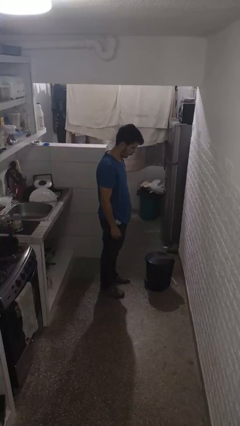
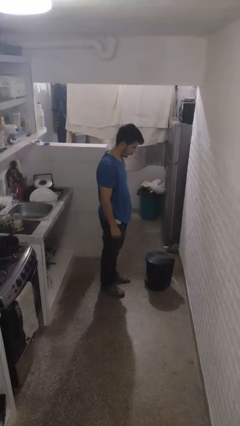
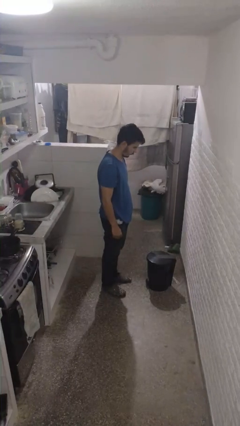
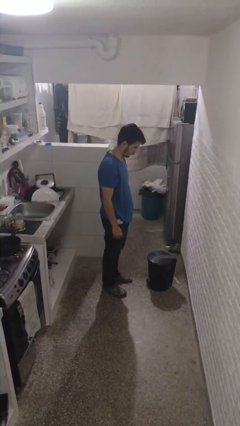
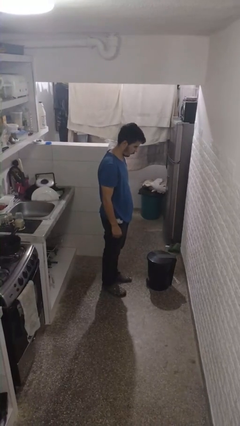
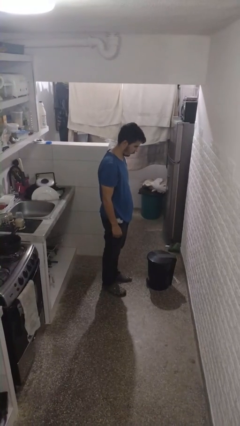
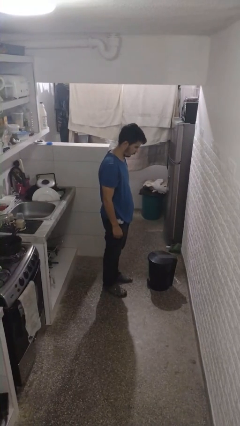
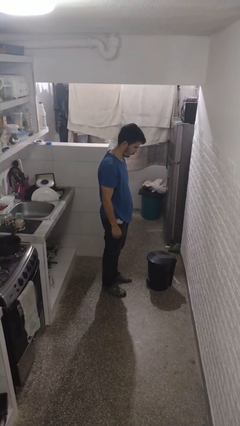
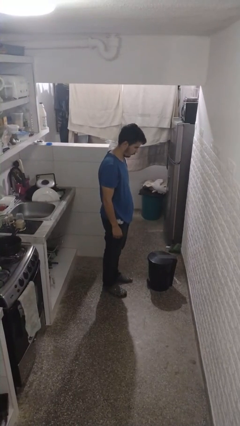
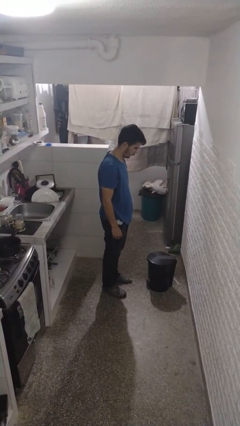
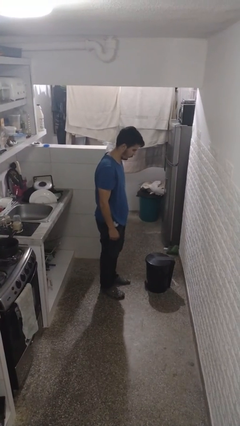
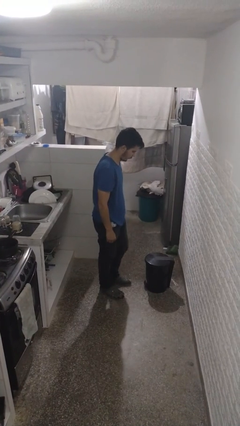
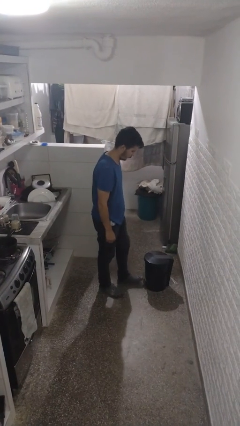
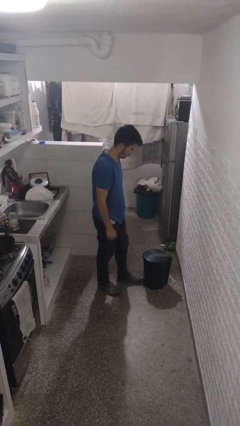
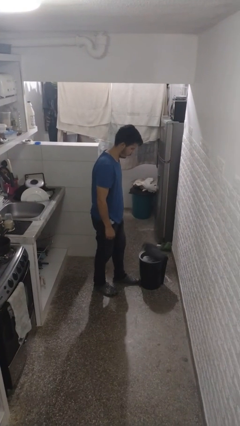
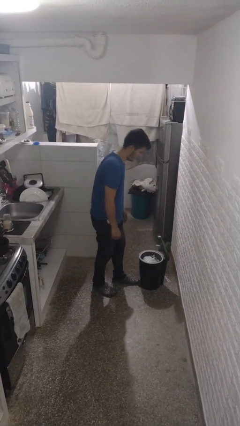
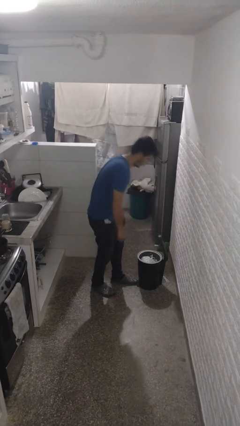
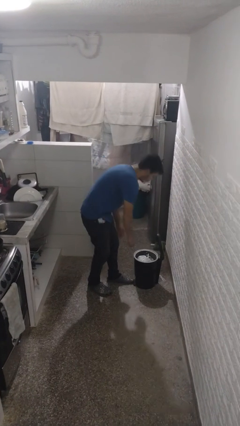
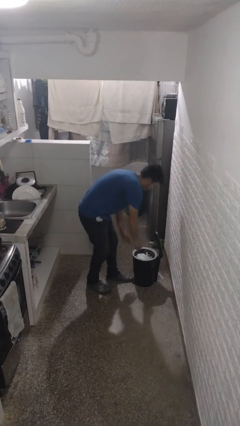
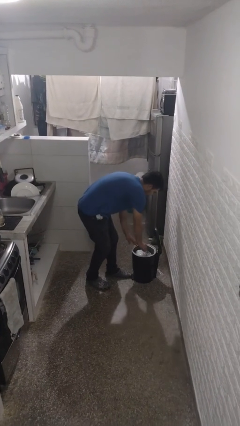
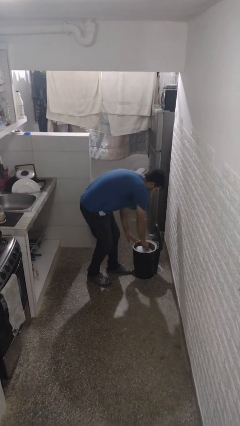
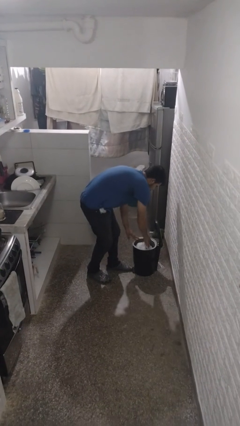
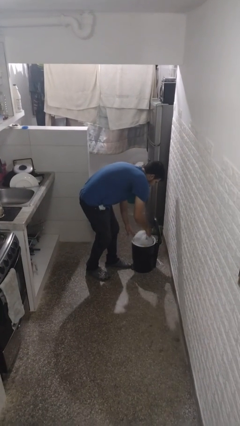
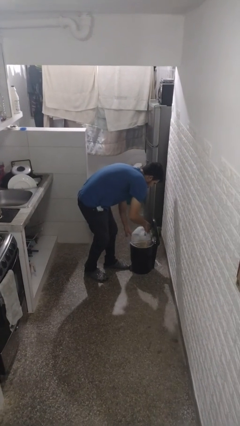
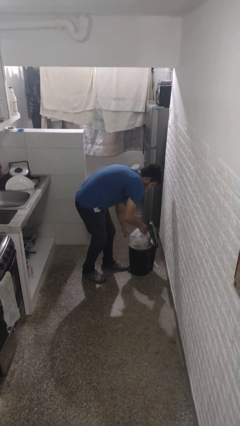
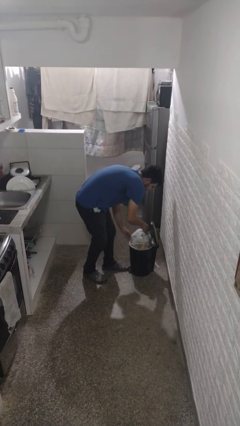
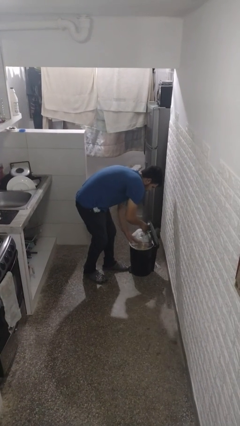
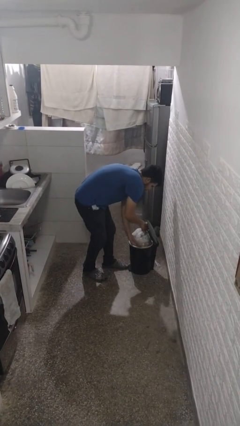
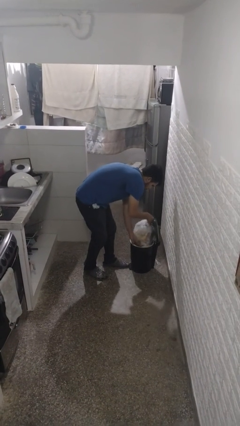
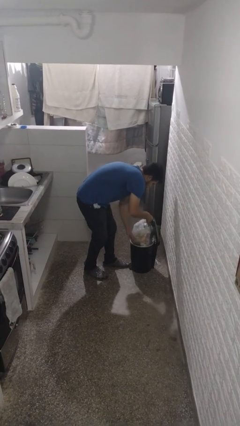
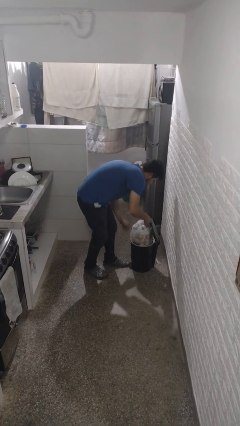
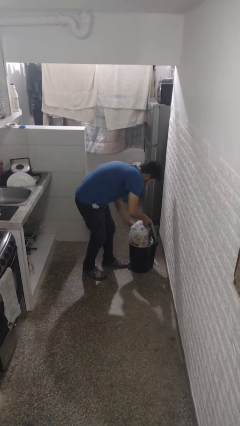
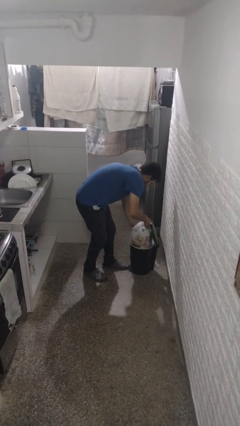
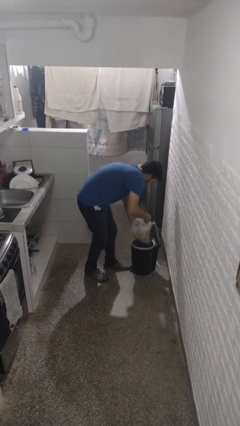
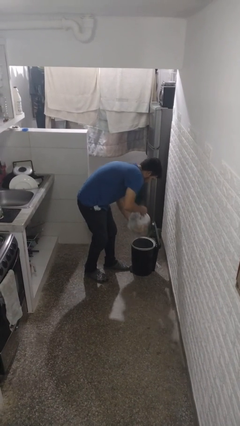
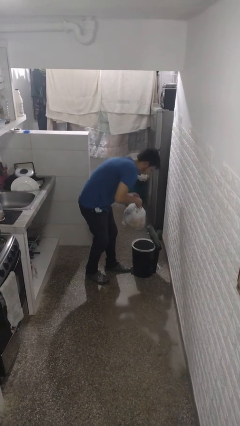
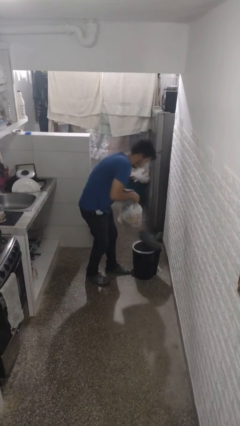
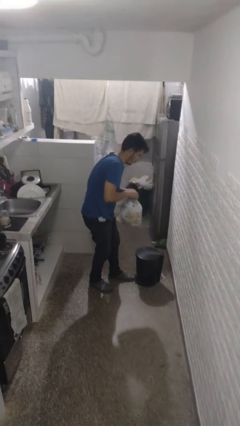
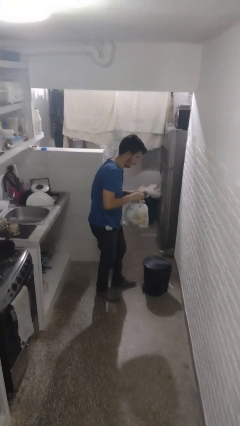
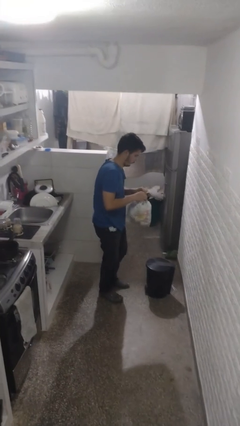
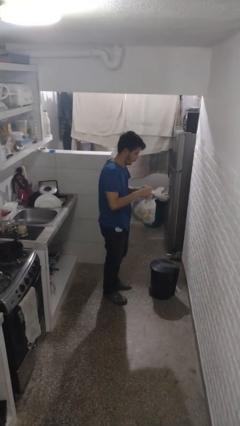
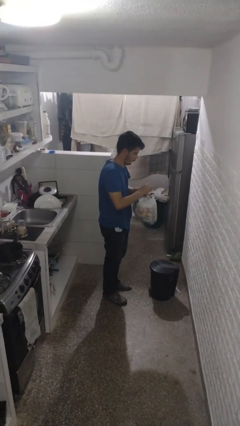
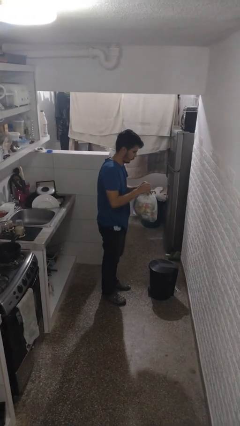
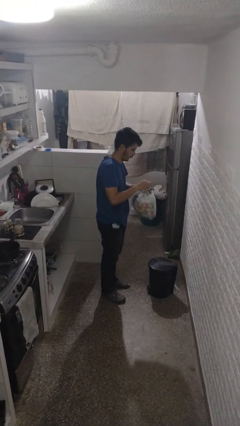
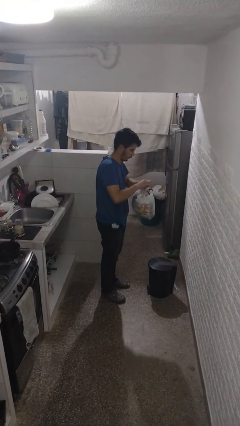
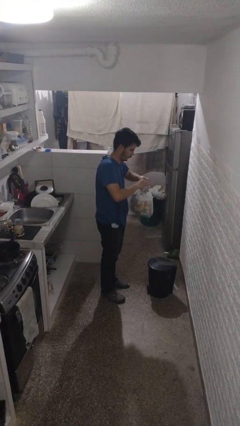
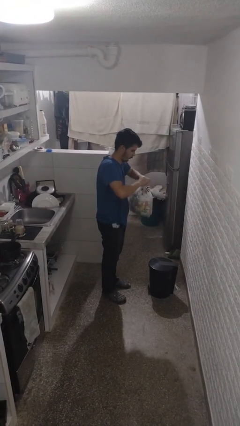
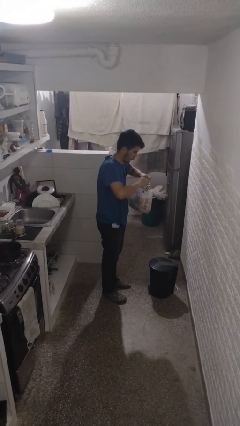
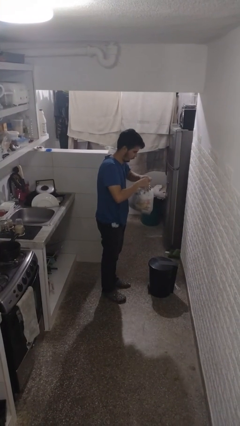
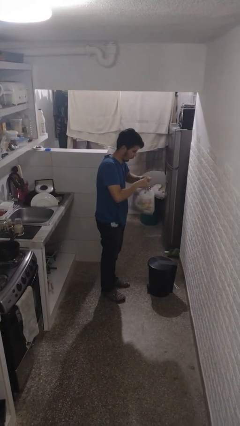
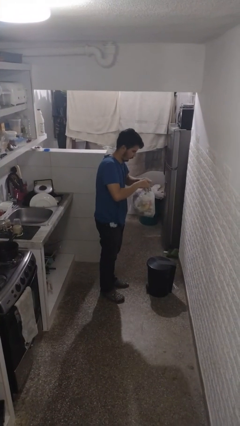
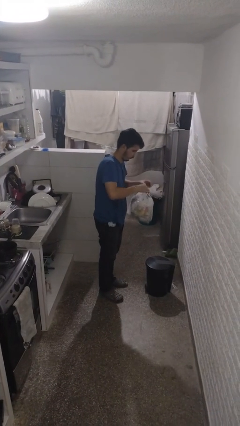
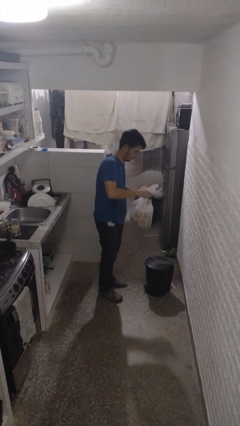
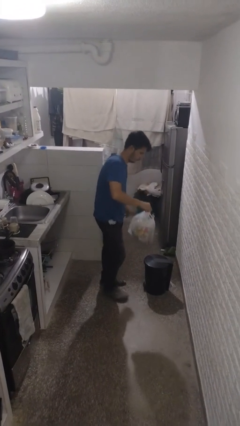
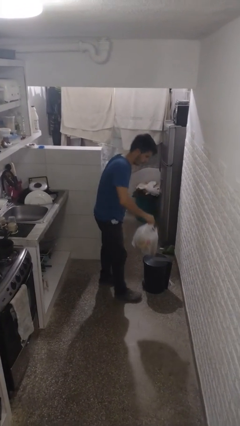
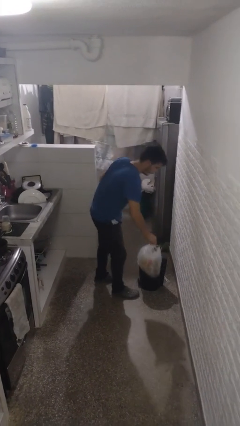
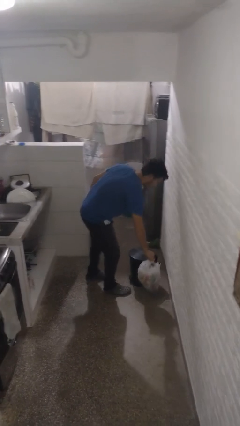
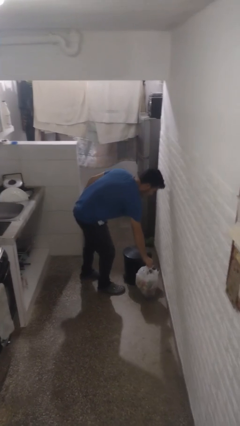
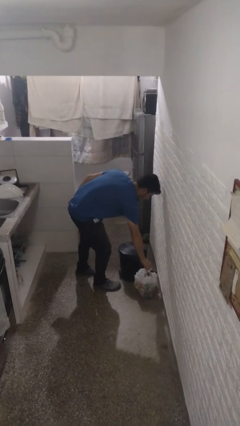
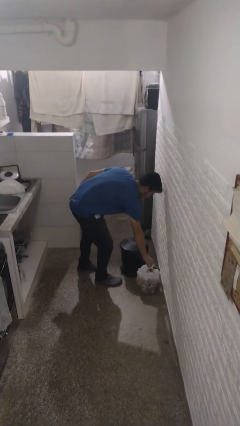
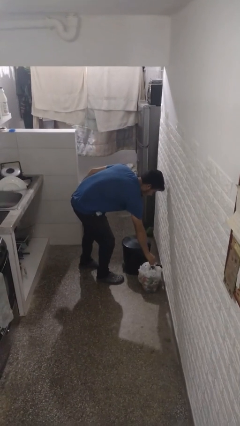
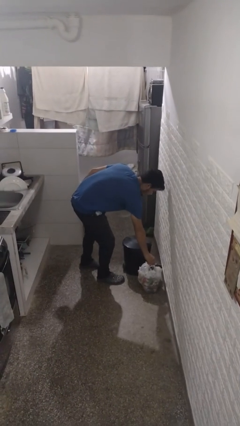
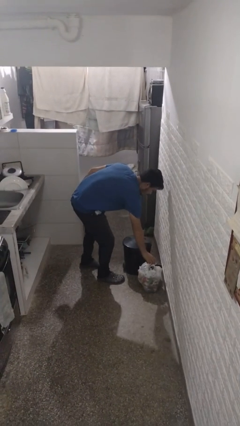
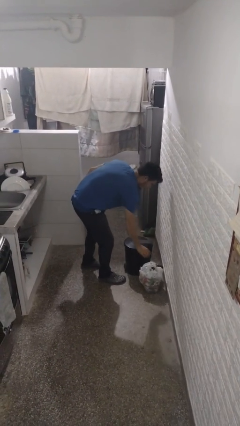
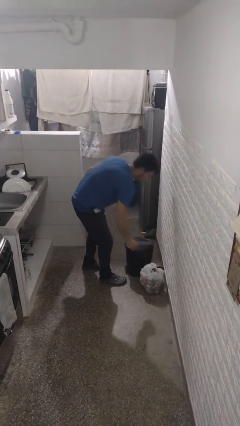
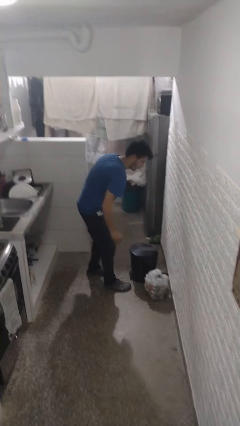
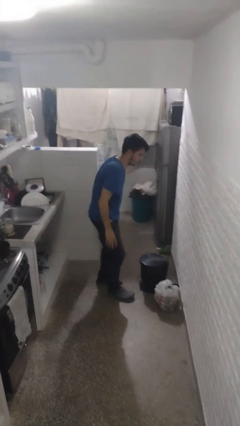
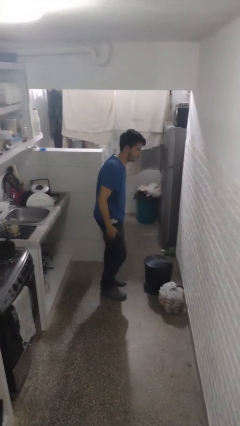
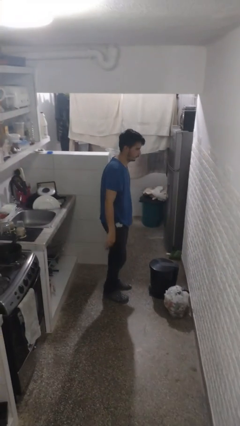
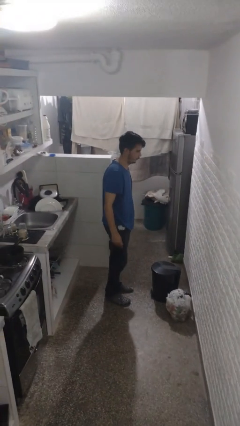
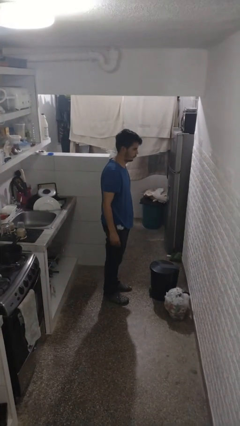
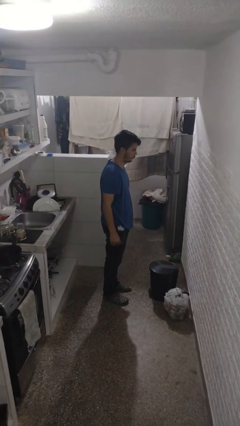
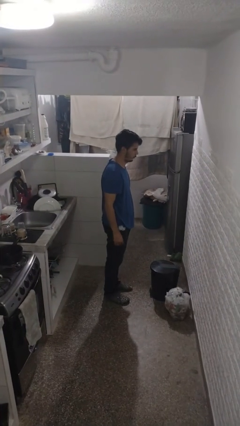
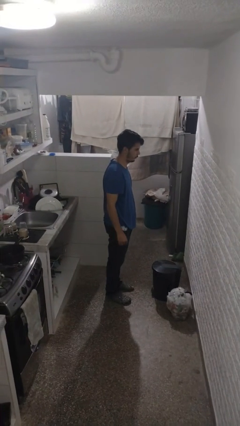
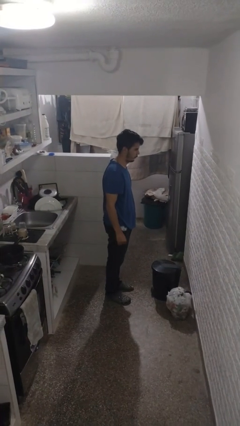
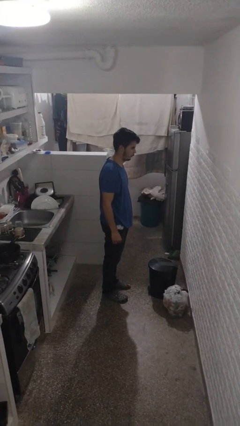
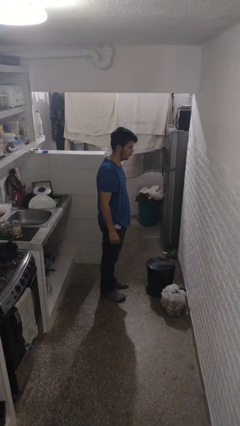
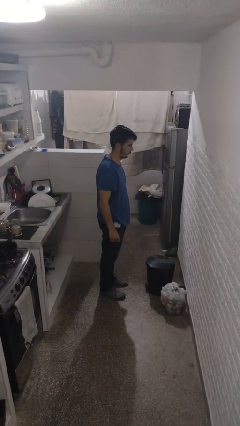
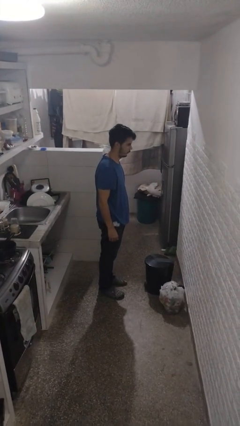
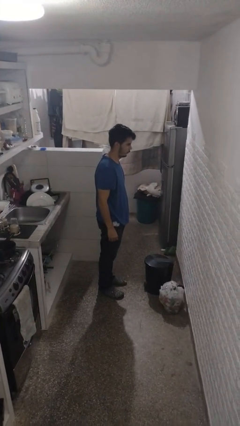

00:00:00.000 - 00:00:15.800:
person removes trashbag from trashcan

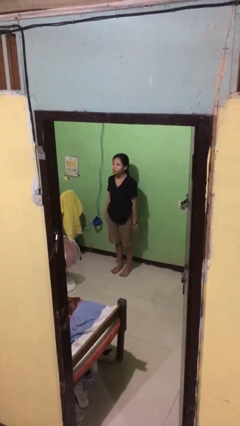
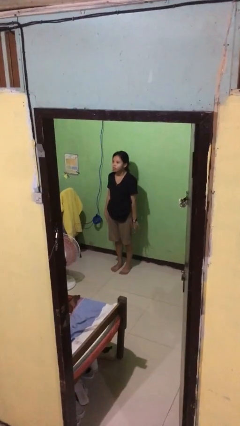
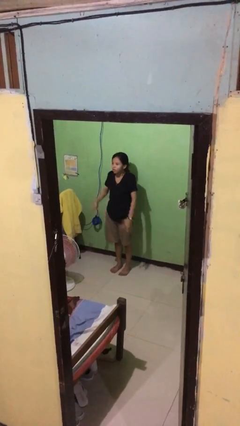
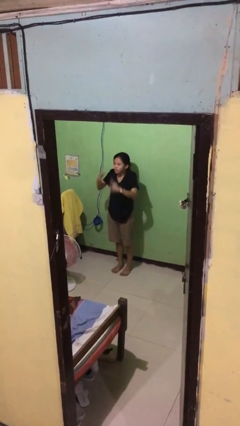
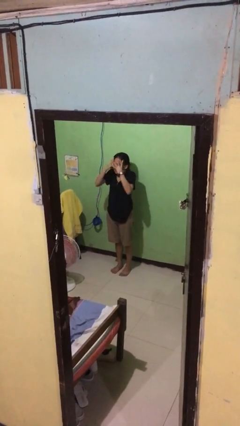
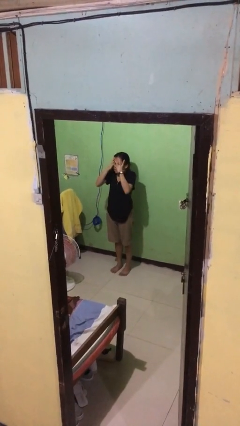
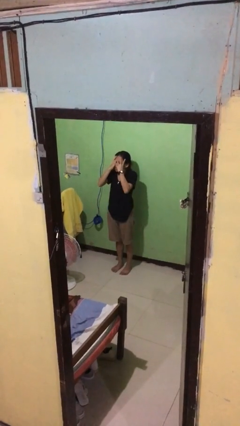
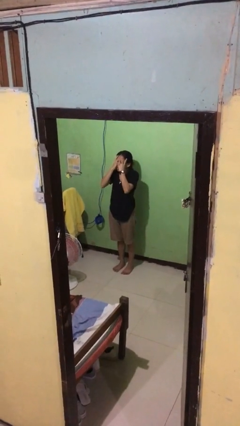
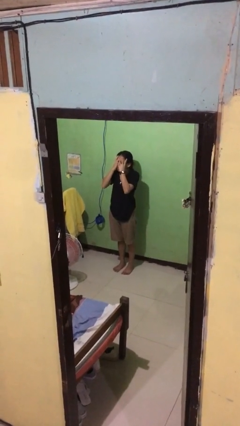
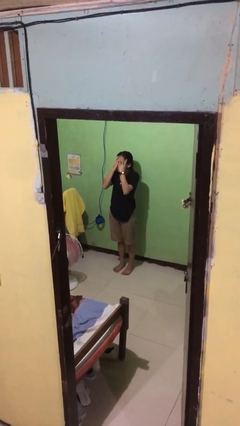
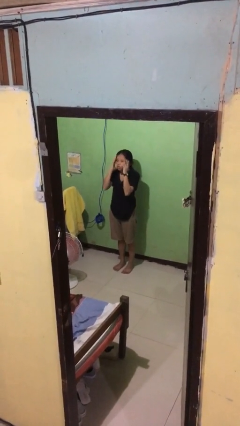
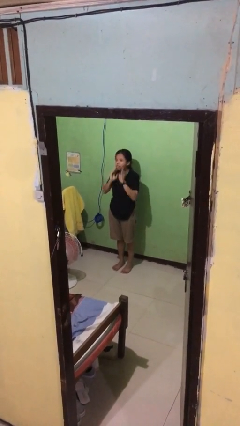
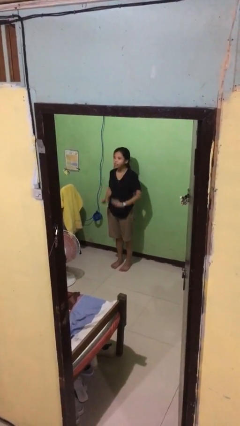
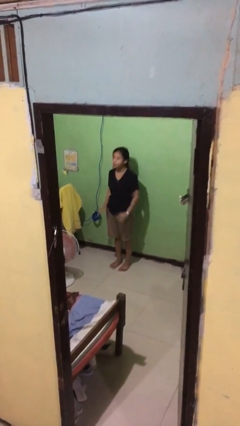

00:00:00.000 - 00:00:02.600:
person covers face with hands
